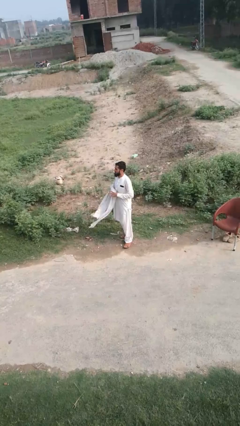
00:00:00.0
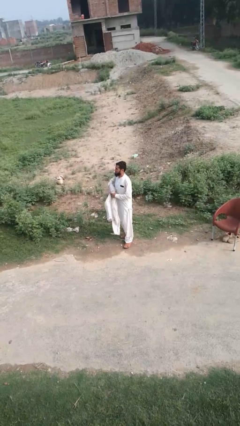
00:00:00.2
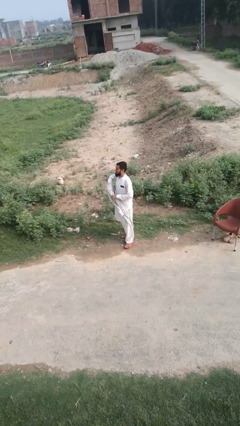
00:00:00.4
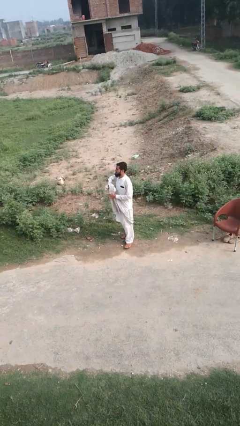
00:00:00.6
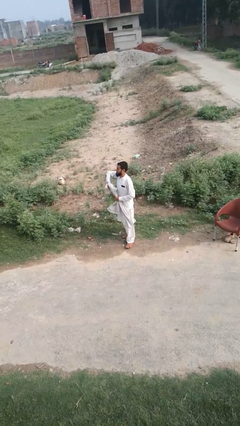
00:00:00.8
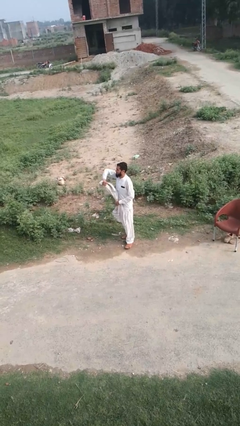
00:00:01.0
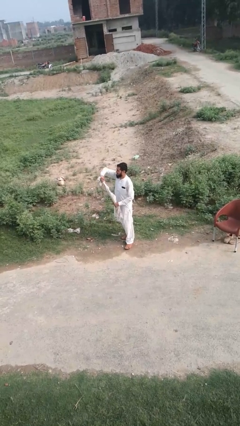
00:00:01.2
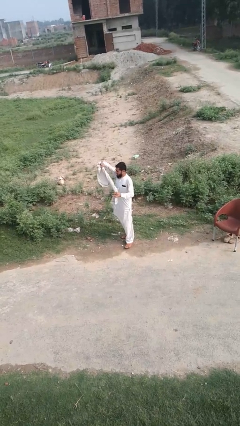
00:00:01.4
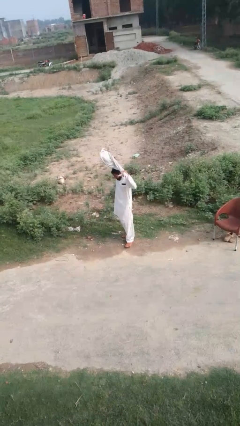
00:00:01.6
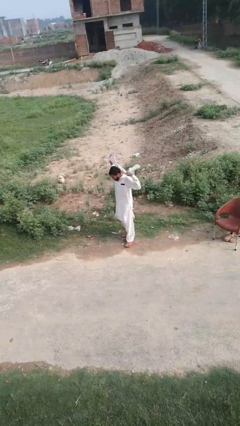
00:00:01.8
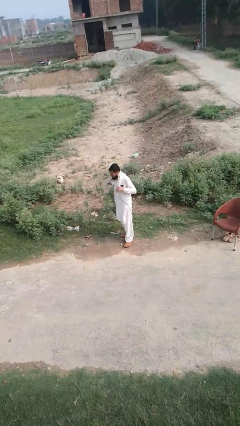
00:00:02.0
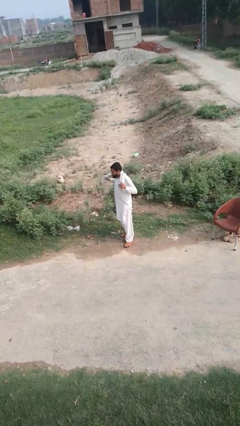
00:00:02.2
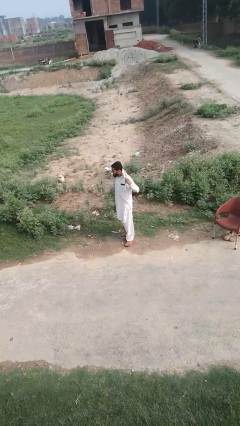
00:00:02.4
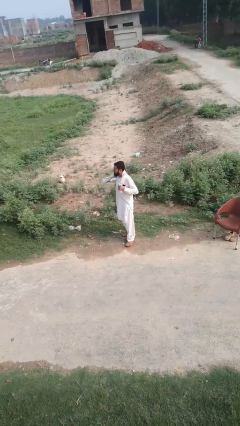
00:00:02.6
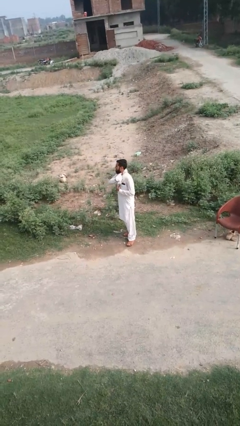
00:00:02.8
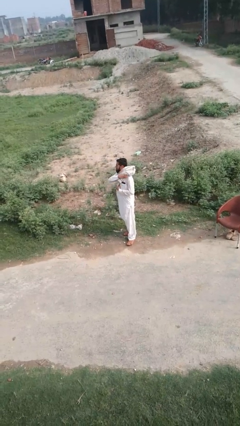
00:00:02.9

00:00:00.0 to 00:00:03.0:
person puts on scarf

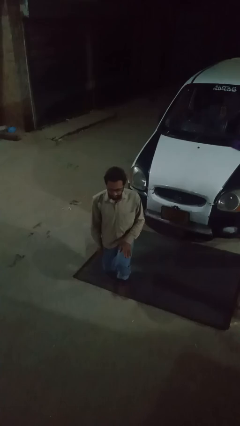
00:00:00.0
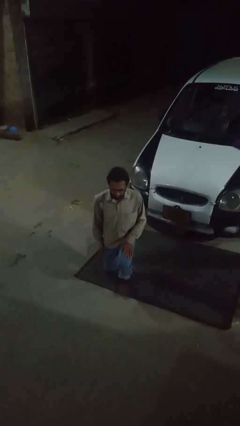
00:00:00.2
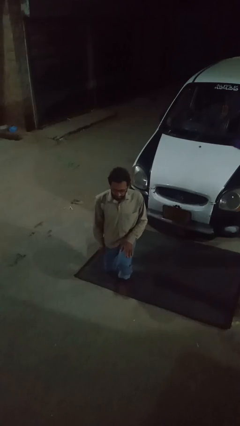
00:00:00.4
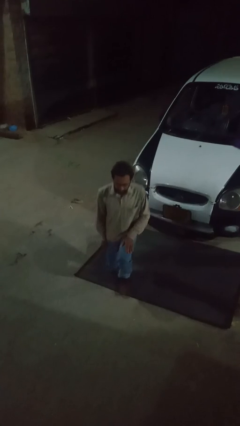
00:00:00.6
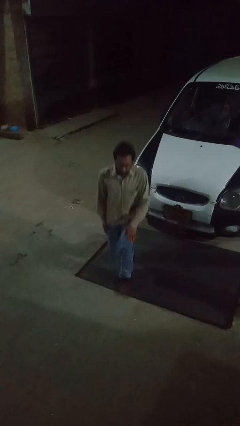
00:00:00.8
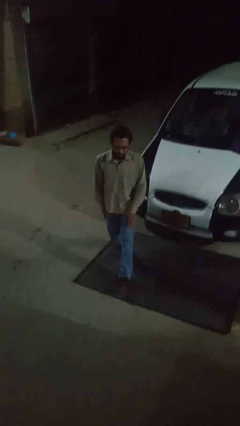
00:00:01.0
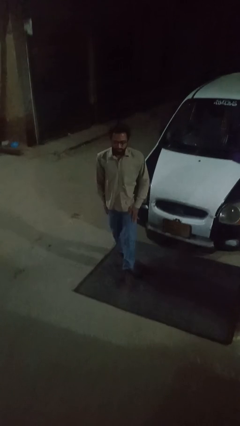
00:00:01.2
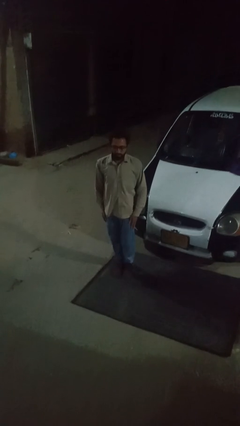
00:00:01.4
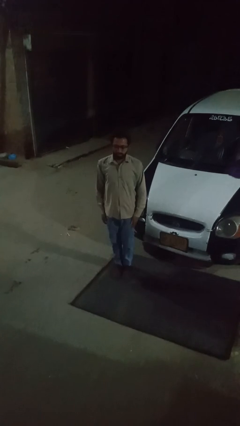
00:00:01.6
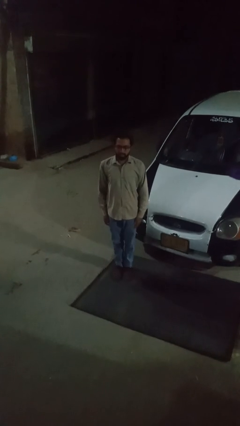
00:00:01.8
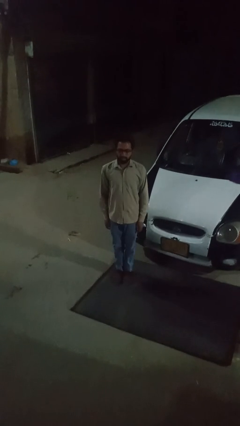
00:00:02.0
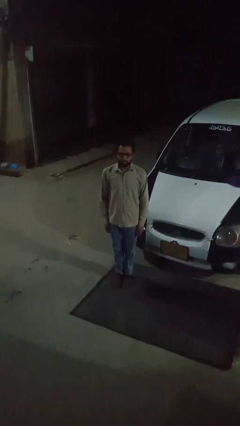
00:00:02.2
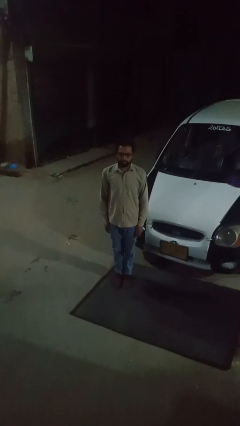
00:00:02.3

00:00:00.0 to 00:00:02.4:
person stands up

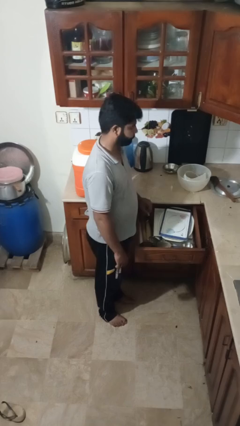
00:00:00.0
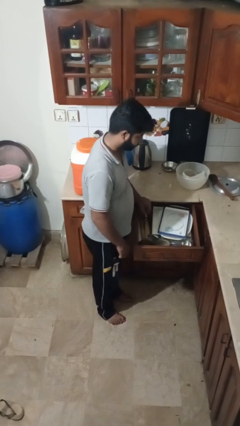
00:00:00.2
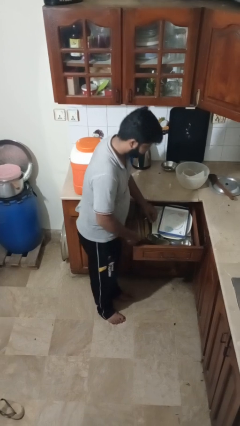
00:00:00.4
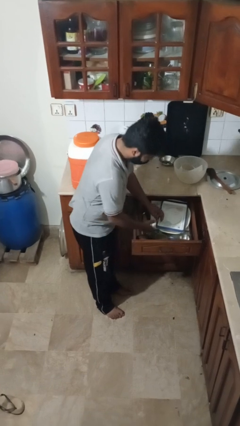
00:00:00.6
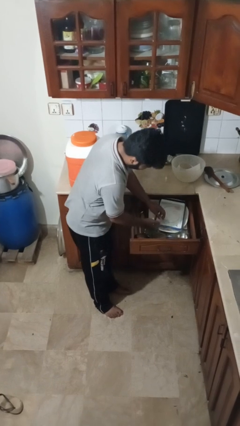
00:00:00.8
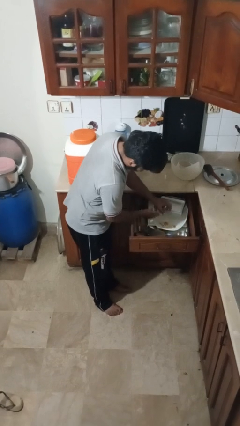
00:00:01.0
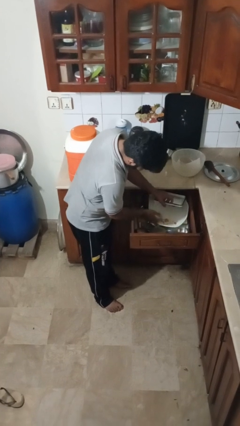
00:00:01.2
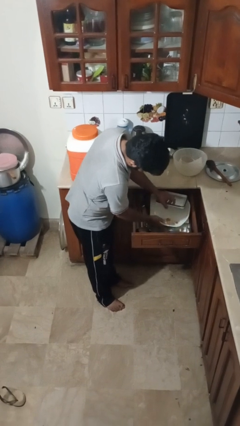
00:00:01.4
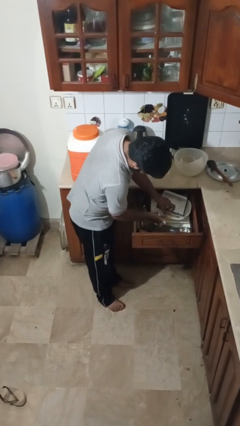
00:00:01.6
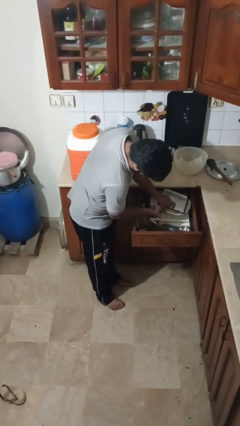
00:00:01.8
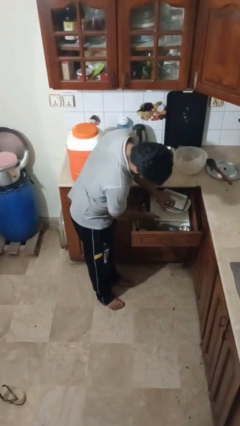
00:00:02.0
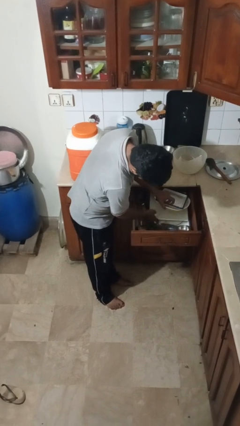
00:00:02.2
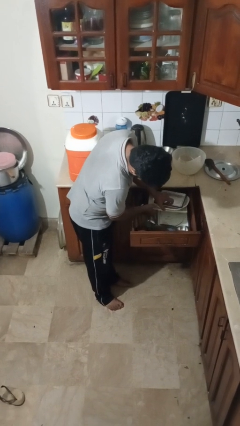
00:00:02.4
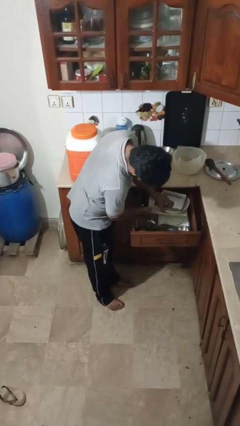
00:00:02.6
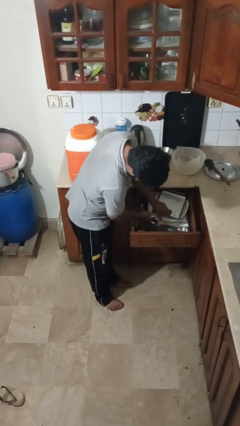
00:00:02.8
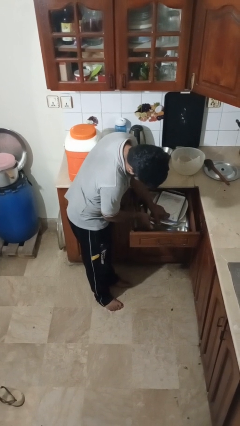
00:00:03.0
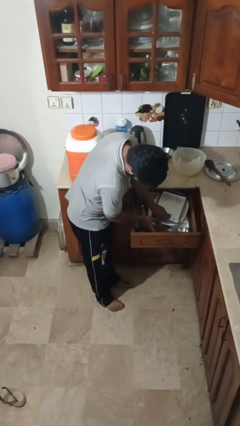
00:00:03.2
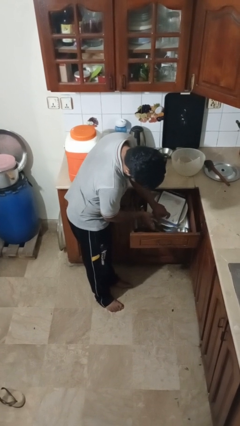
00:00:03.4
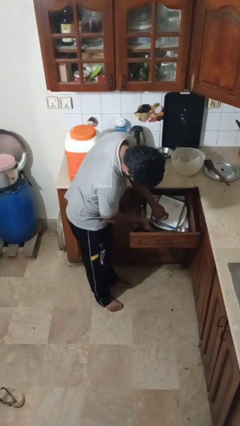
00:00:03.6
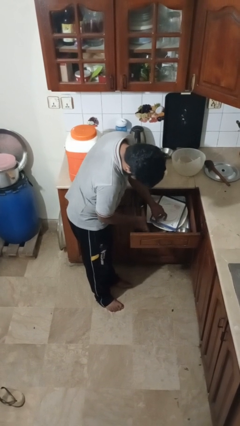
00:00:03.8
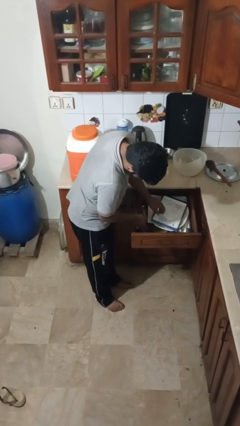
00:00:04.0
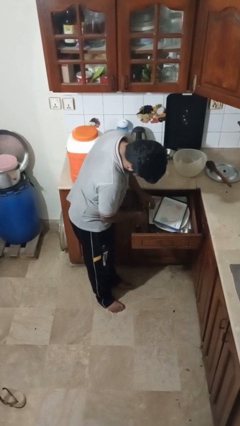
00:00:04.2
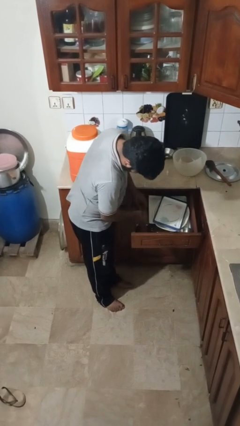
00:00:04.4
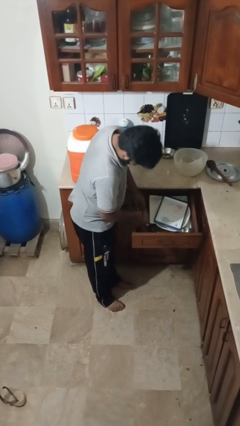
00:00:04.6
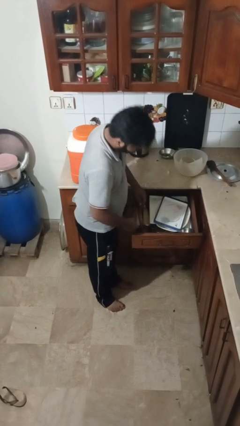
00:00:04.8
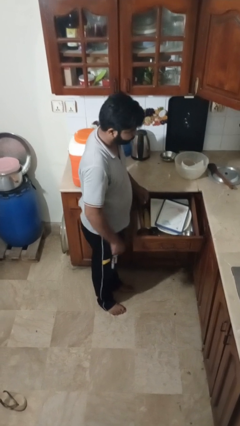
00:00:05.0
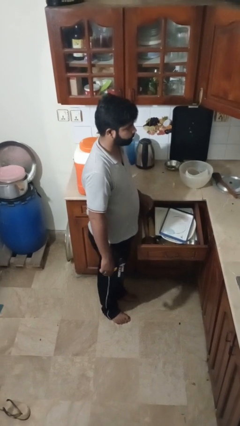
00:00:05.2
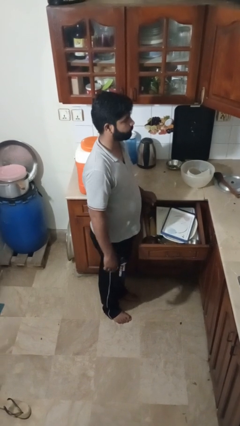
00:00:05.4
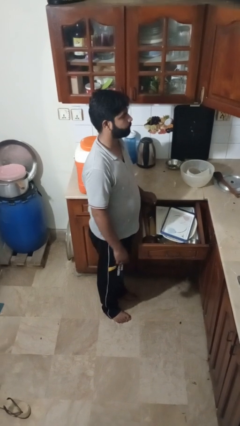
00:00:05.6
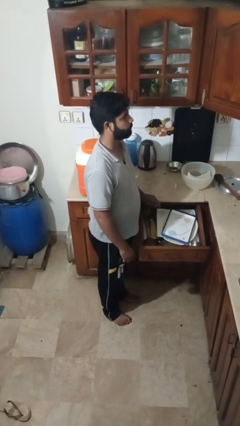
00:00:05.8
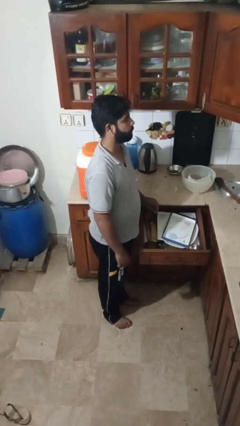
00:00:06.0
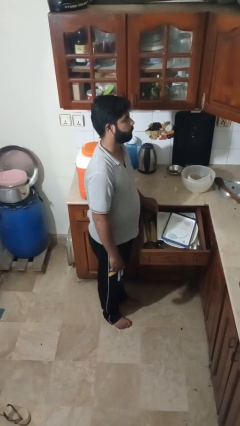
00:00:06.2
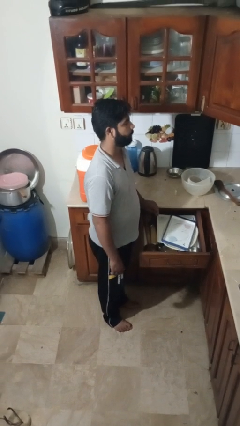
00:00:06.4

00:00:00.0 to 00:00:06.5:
person searches in kitchen drawer

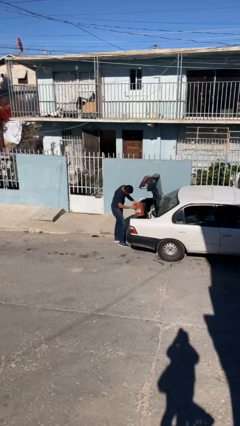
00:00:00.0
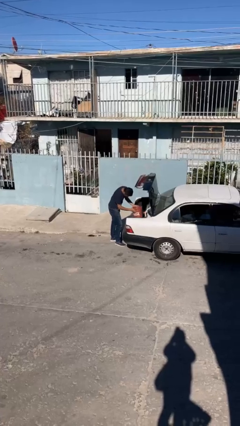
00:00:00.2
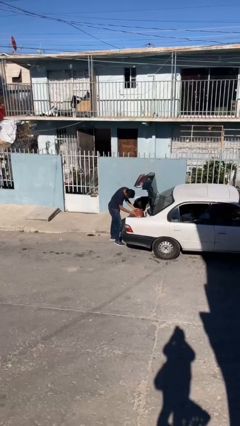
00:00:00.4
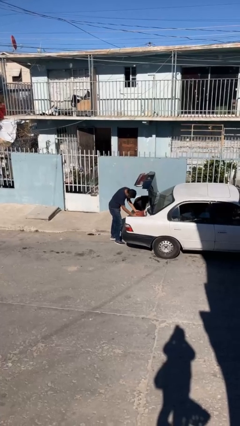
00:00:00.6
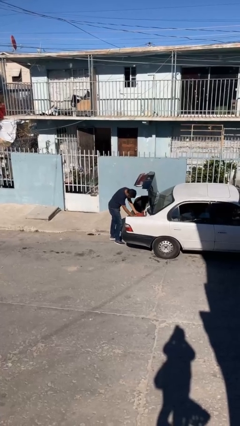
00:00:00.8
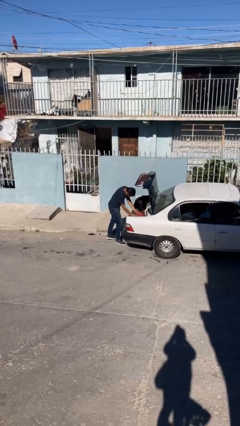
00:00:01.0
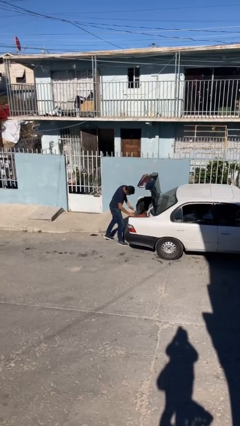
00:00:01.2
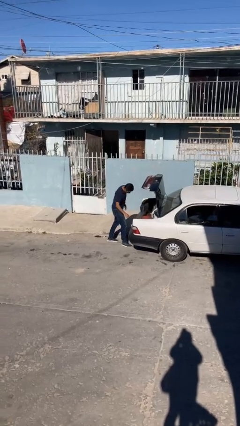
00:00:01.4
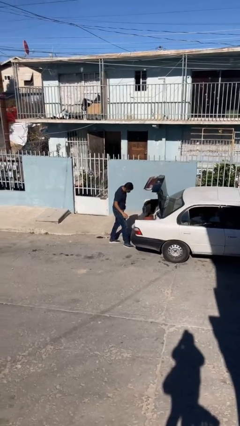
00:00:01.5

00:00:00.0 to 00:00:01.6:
person loads car

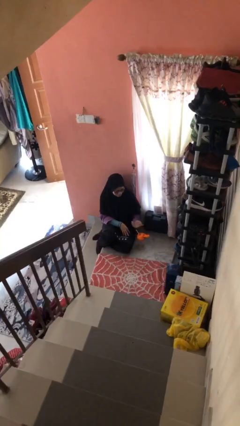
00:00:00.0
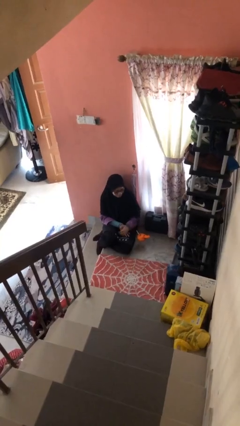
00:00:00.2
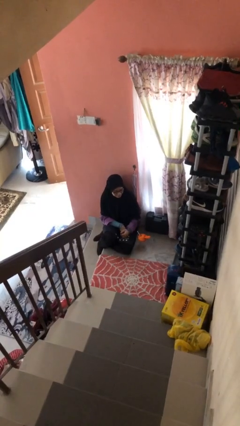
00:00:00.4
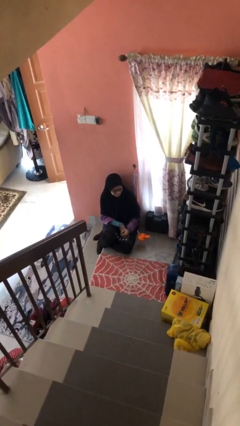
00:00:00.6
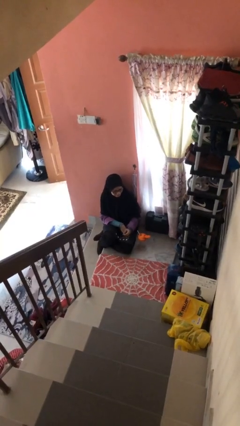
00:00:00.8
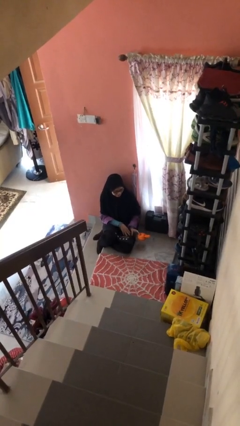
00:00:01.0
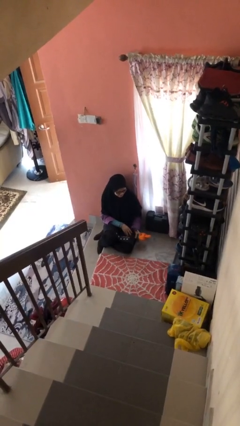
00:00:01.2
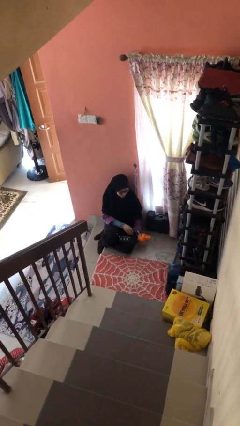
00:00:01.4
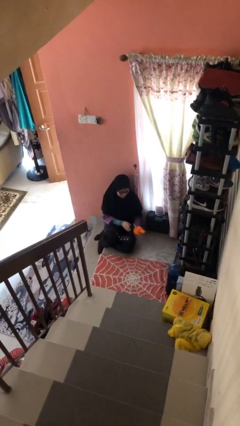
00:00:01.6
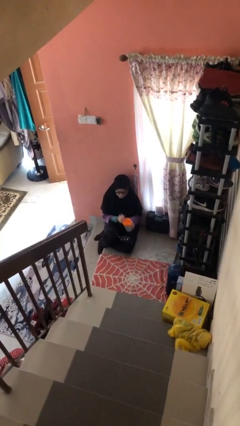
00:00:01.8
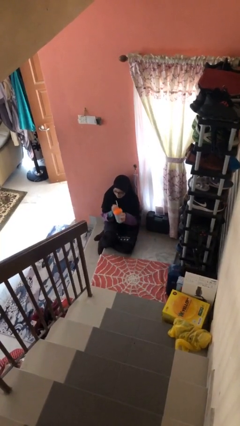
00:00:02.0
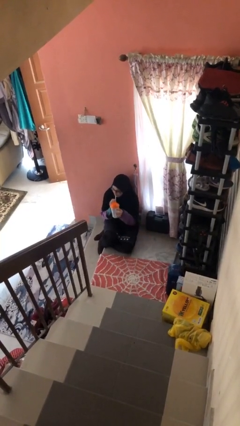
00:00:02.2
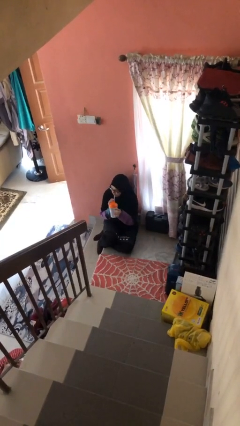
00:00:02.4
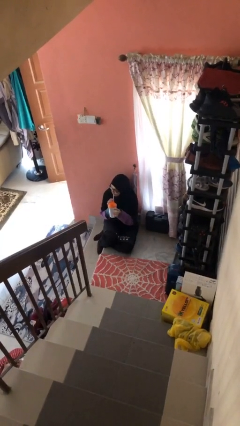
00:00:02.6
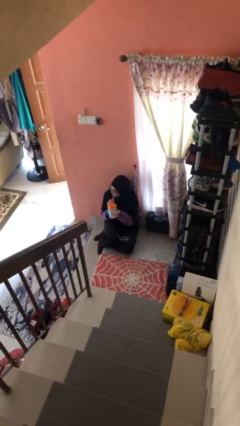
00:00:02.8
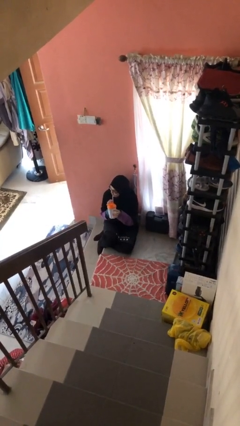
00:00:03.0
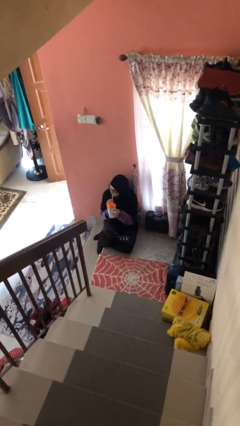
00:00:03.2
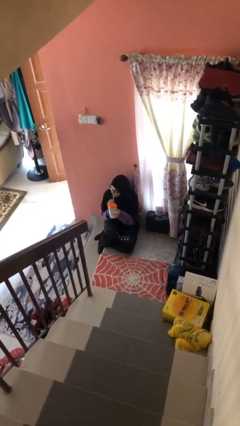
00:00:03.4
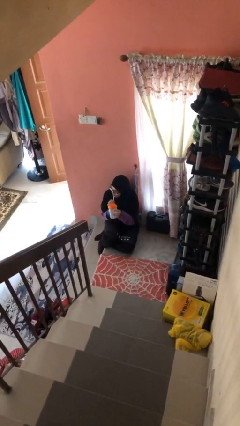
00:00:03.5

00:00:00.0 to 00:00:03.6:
person drinks from straw

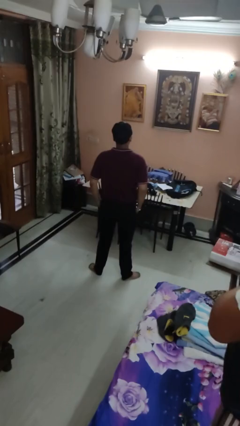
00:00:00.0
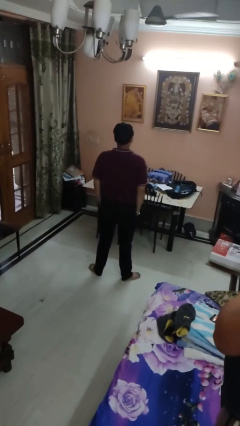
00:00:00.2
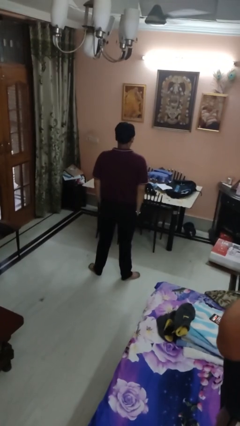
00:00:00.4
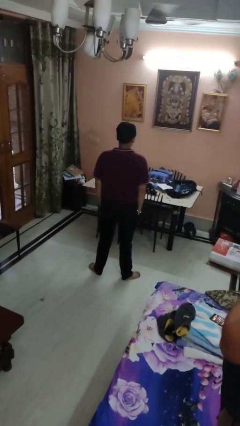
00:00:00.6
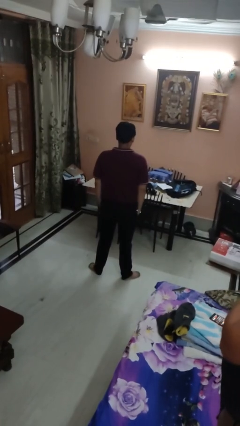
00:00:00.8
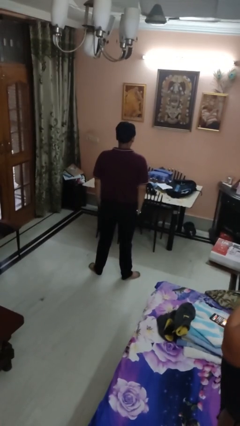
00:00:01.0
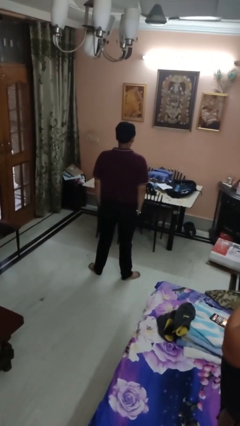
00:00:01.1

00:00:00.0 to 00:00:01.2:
person puts hands in back pockets
